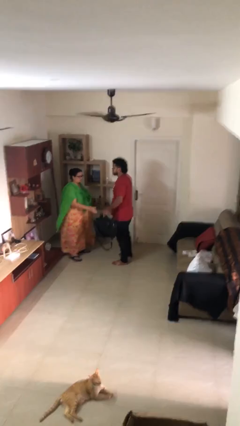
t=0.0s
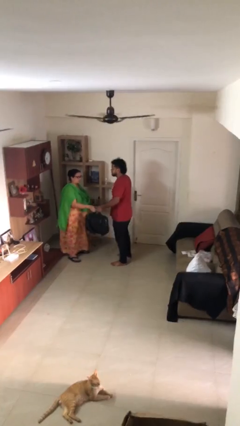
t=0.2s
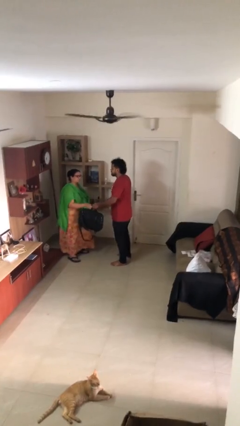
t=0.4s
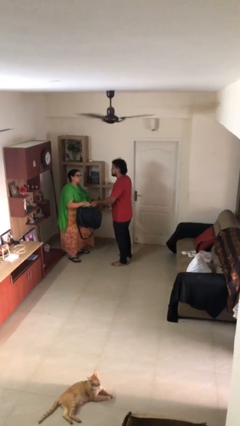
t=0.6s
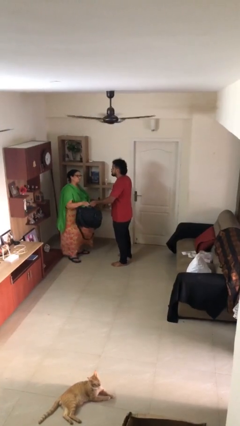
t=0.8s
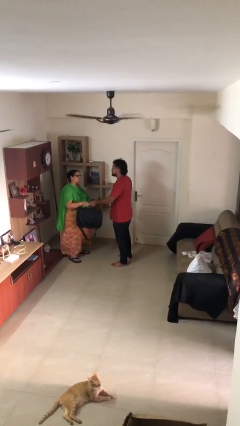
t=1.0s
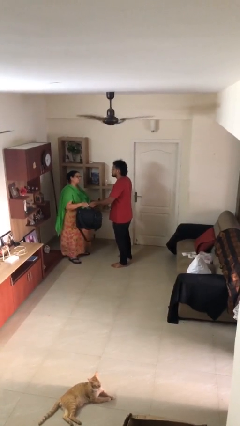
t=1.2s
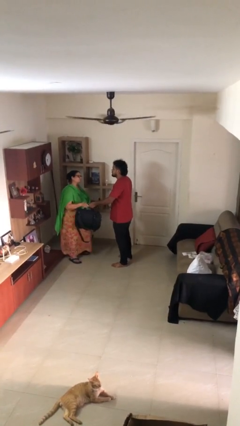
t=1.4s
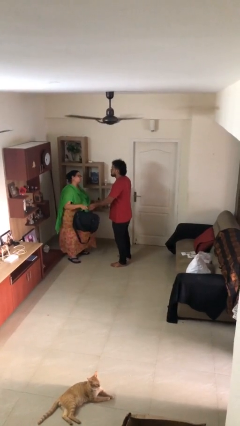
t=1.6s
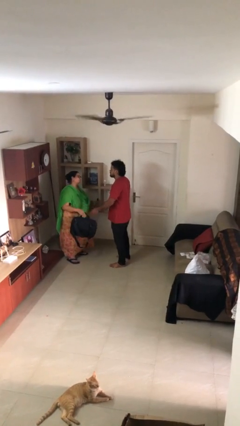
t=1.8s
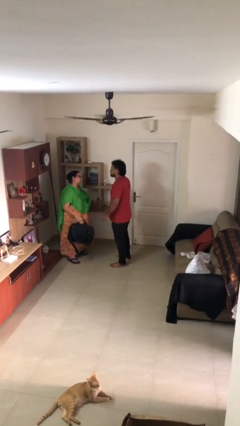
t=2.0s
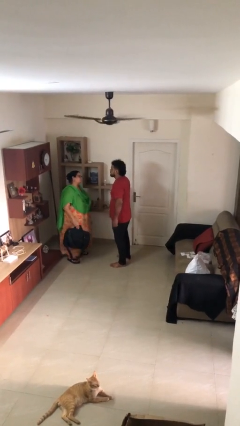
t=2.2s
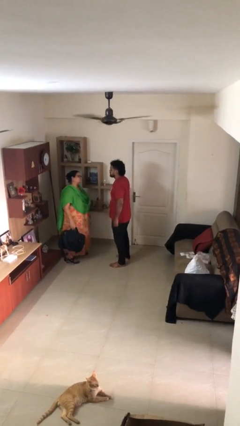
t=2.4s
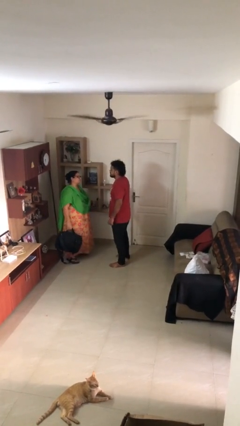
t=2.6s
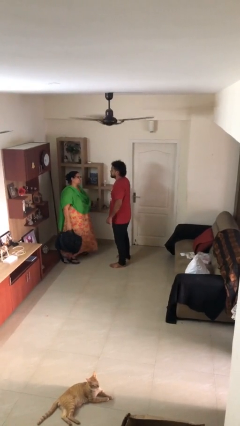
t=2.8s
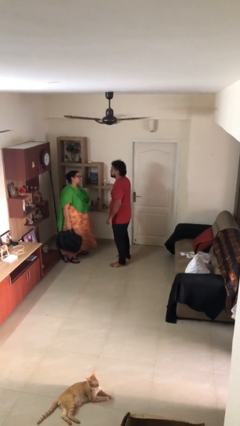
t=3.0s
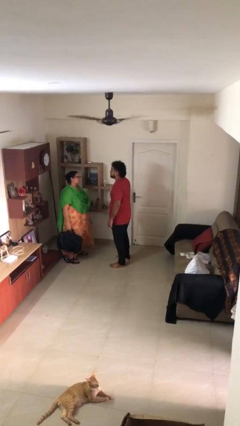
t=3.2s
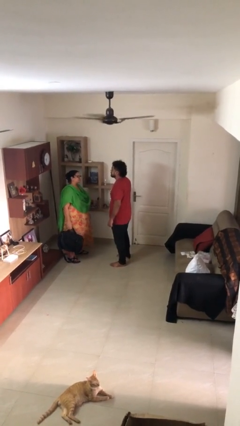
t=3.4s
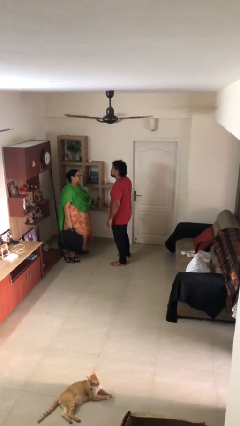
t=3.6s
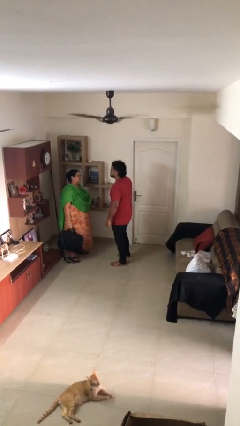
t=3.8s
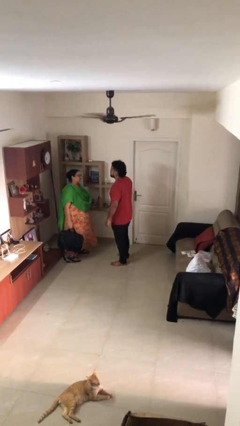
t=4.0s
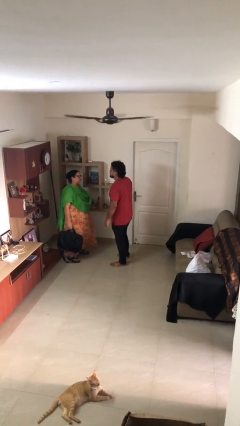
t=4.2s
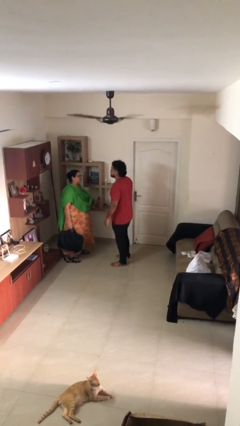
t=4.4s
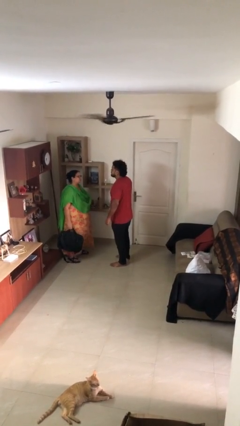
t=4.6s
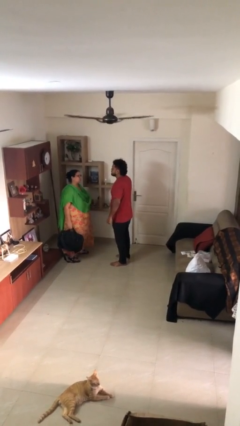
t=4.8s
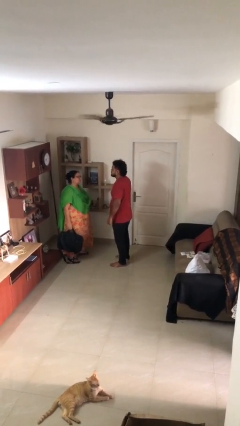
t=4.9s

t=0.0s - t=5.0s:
person transfers object to person

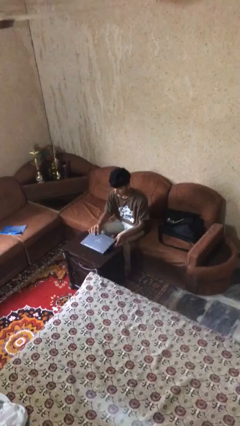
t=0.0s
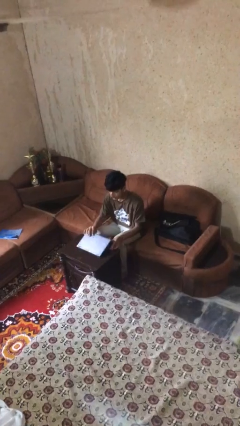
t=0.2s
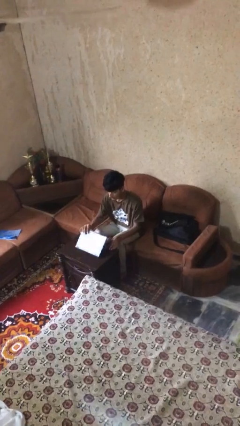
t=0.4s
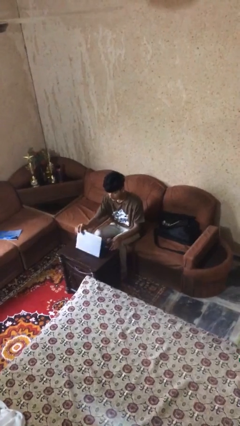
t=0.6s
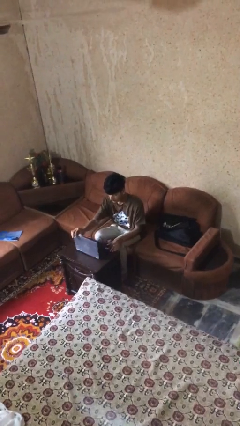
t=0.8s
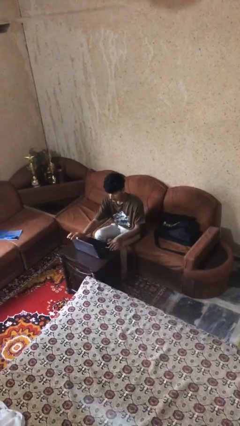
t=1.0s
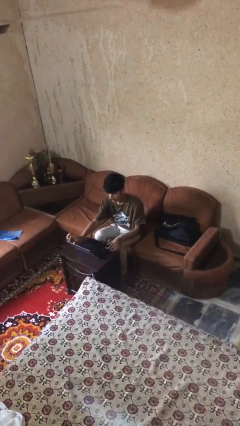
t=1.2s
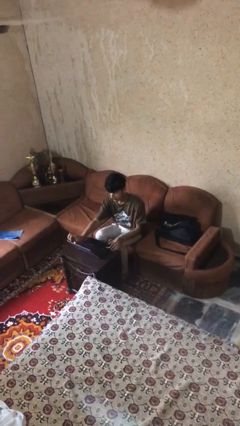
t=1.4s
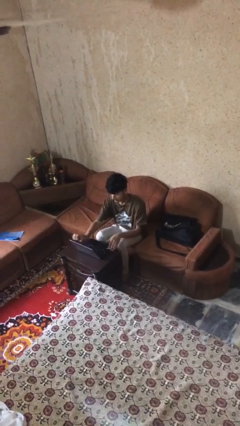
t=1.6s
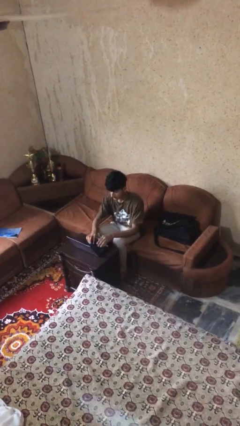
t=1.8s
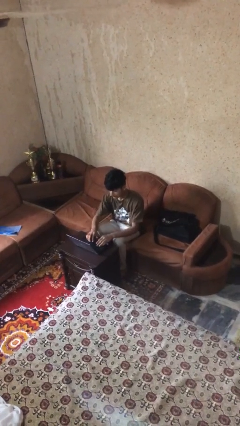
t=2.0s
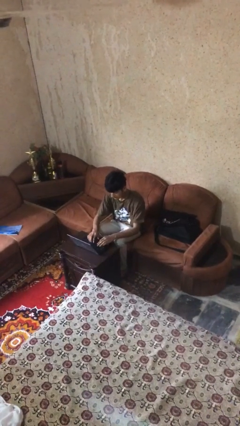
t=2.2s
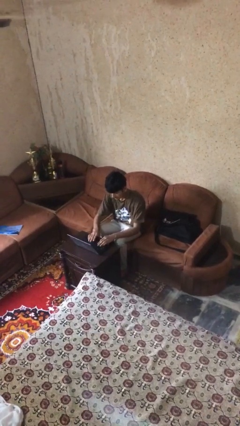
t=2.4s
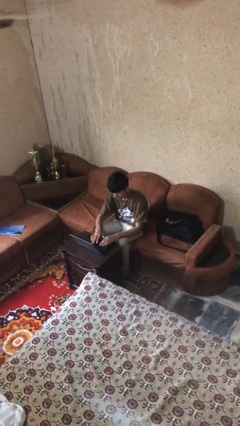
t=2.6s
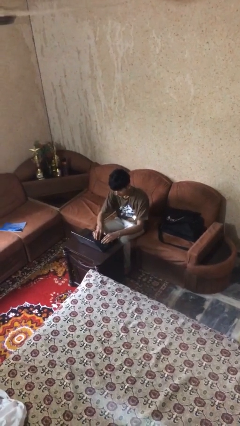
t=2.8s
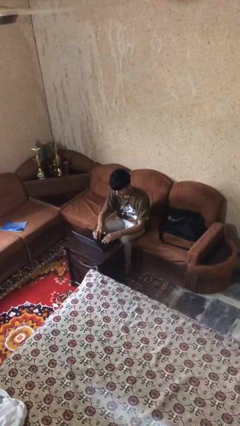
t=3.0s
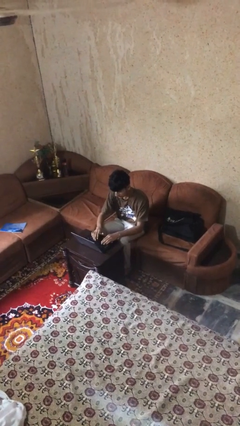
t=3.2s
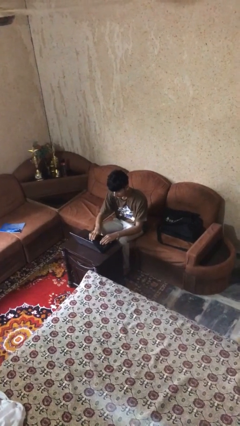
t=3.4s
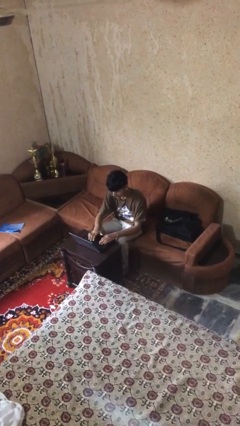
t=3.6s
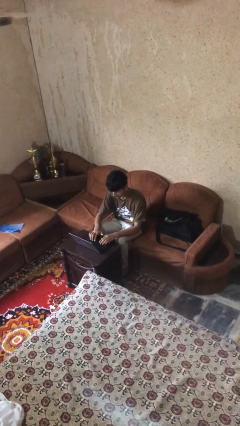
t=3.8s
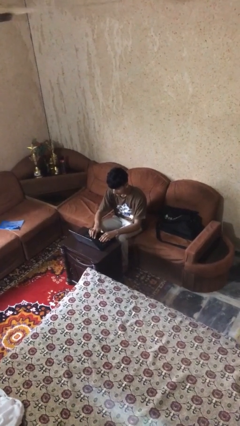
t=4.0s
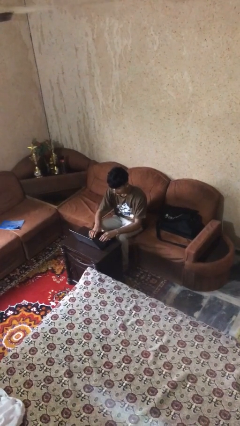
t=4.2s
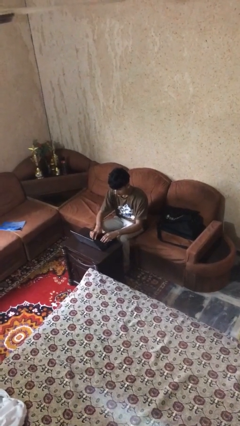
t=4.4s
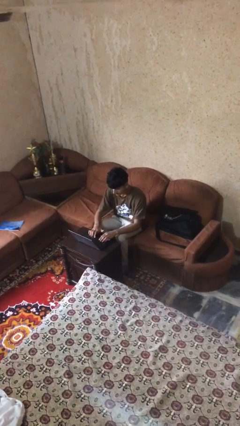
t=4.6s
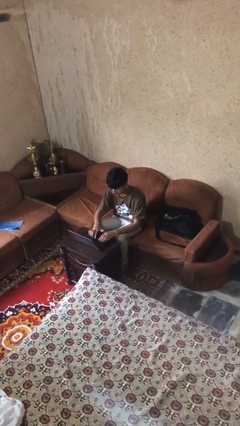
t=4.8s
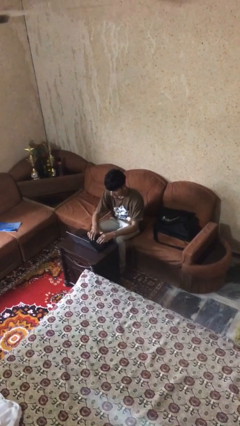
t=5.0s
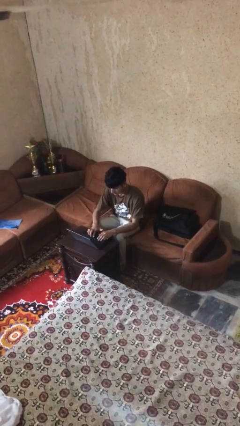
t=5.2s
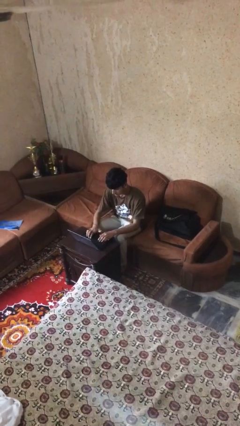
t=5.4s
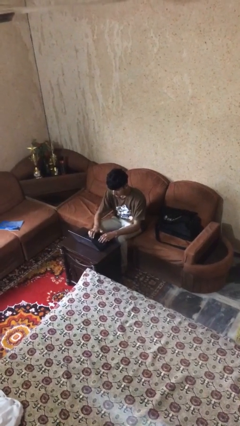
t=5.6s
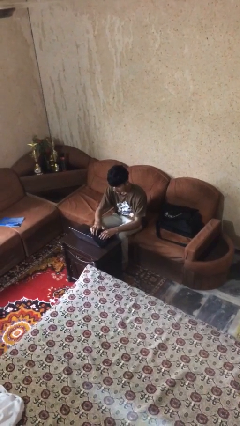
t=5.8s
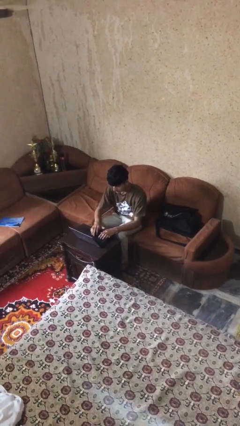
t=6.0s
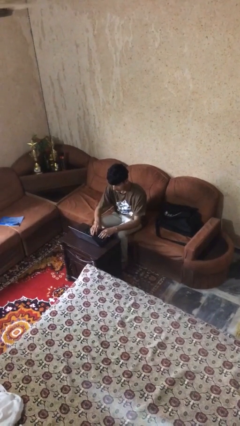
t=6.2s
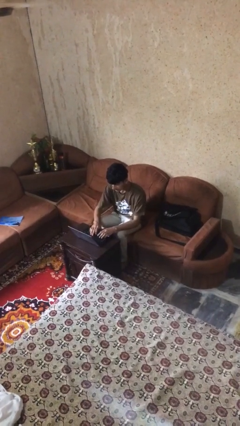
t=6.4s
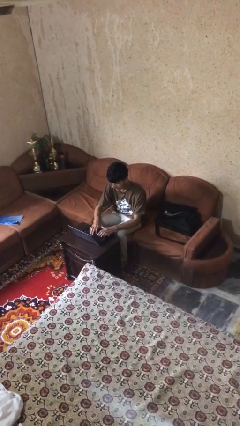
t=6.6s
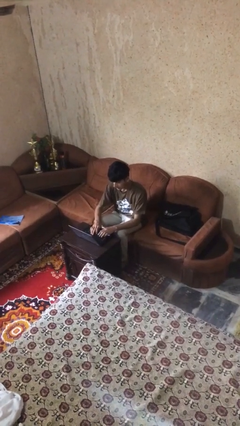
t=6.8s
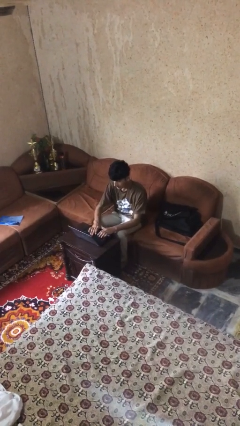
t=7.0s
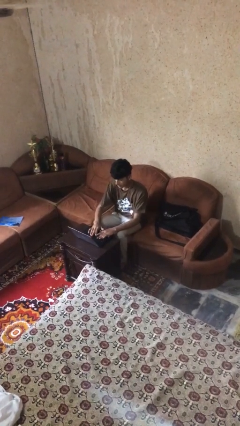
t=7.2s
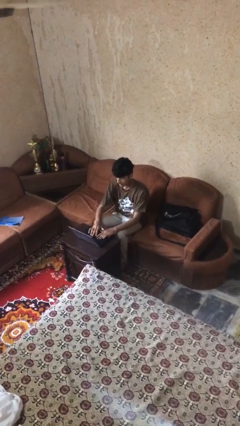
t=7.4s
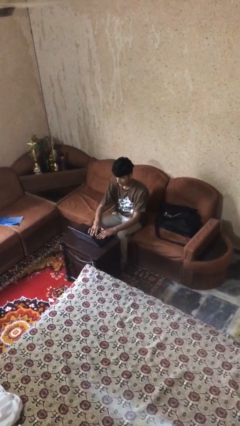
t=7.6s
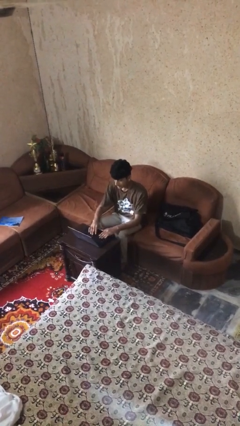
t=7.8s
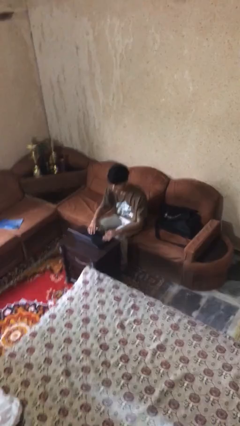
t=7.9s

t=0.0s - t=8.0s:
person interacts with laptop

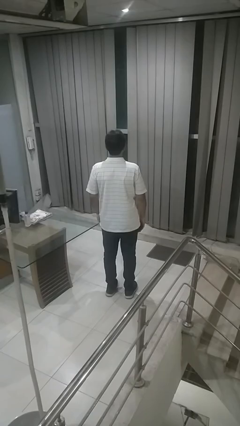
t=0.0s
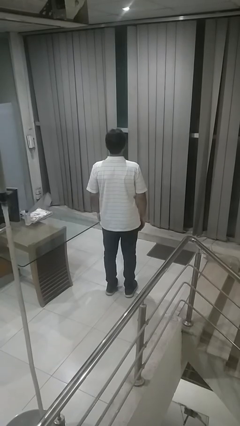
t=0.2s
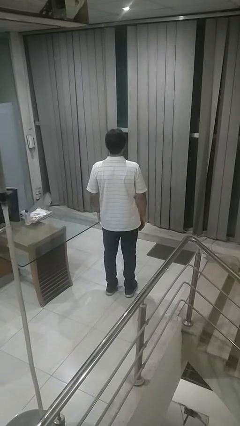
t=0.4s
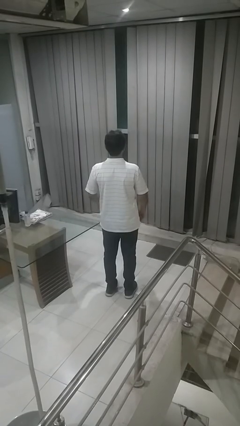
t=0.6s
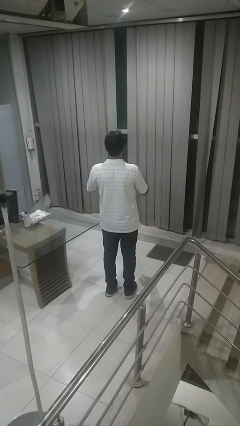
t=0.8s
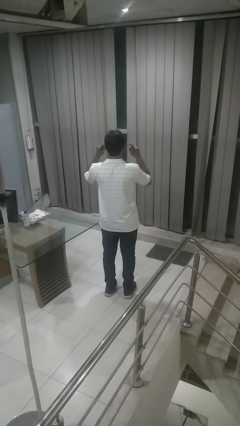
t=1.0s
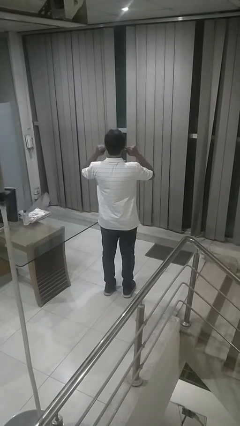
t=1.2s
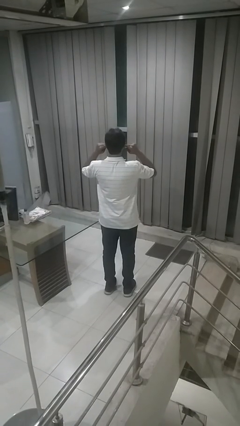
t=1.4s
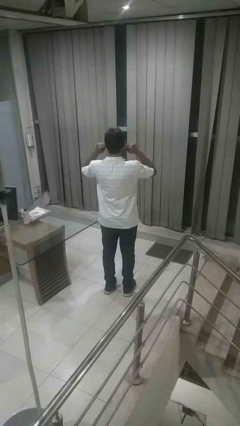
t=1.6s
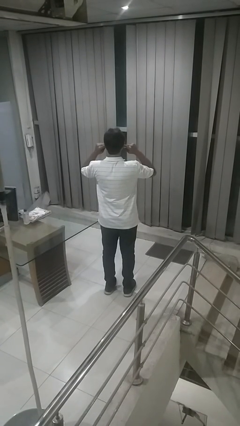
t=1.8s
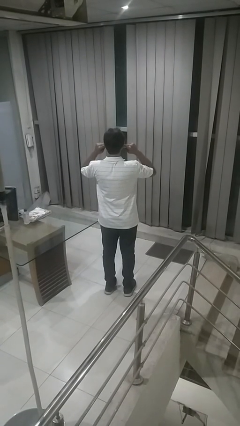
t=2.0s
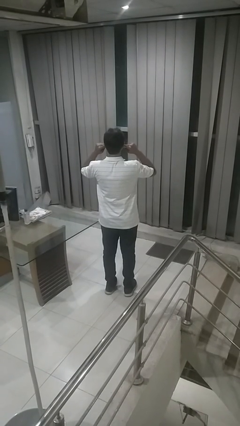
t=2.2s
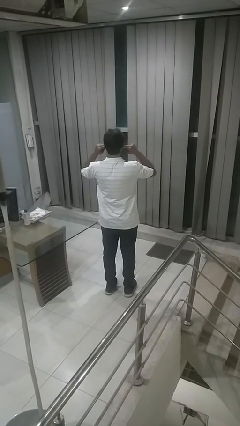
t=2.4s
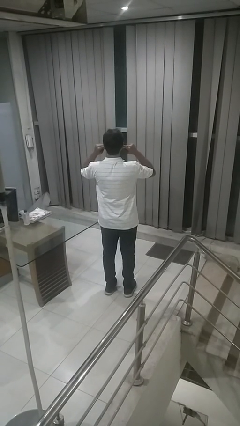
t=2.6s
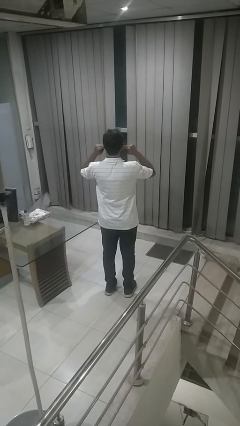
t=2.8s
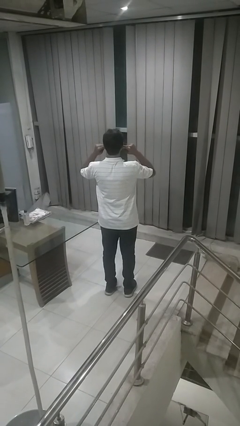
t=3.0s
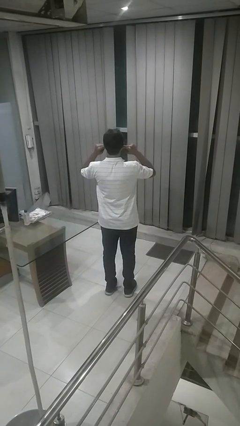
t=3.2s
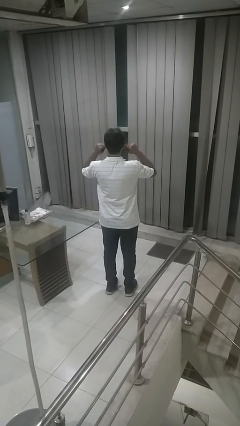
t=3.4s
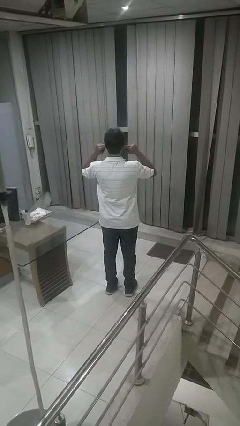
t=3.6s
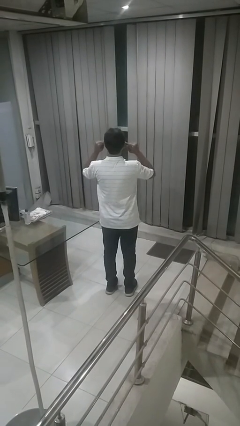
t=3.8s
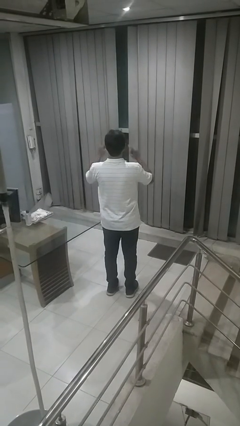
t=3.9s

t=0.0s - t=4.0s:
person puts fingers in ear

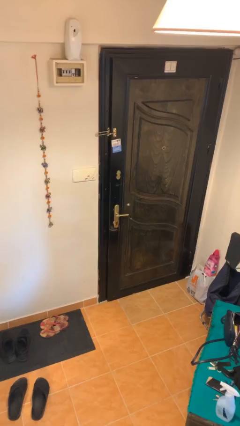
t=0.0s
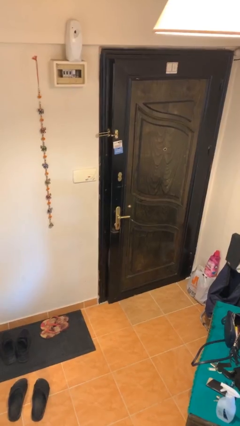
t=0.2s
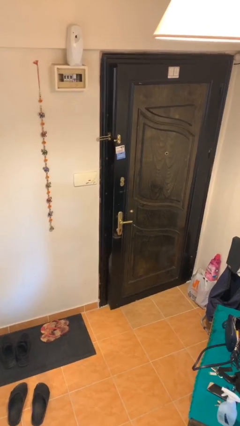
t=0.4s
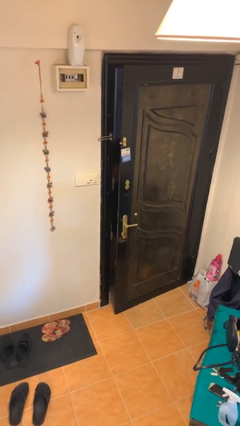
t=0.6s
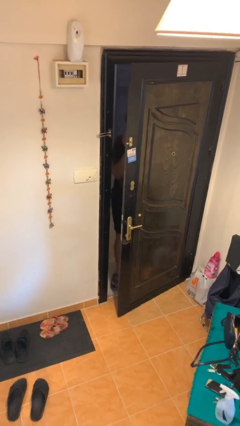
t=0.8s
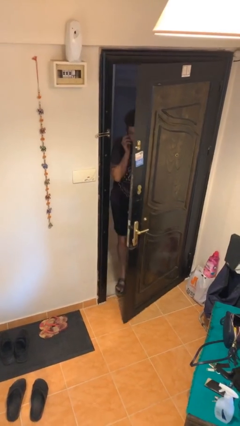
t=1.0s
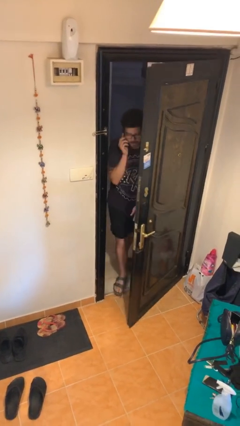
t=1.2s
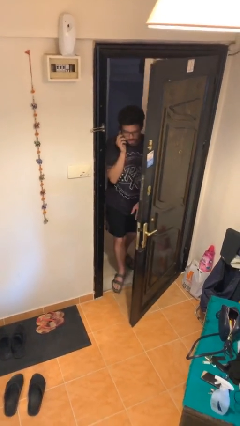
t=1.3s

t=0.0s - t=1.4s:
person opens facility door
